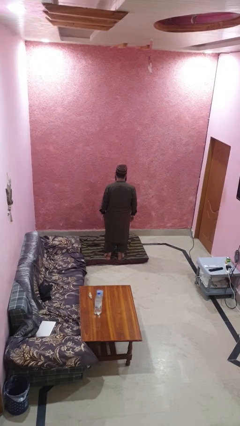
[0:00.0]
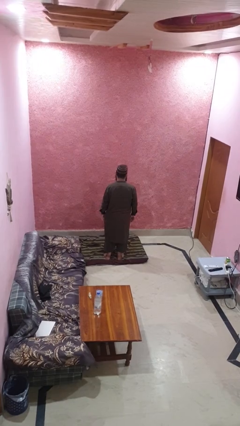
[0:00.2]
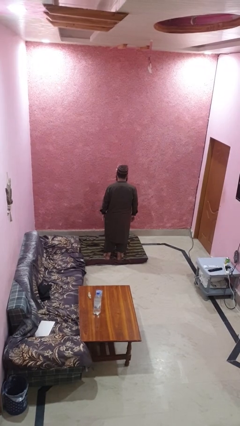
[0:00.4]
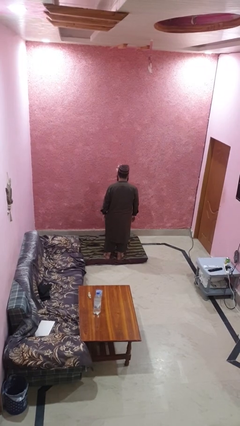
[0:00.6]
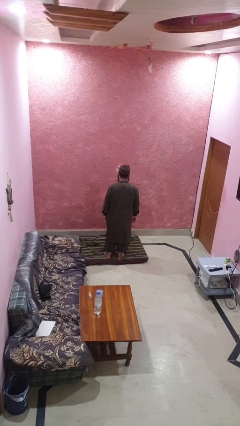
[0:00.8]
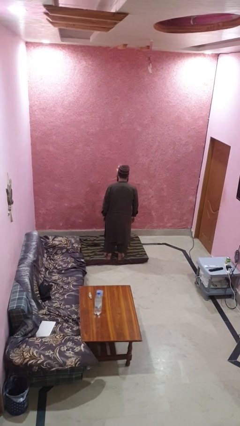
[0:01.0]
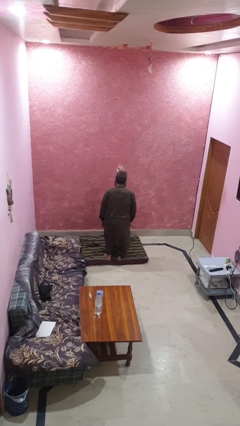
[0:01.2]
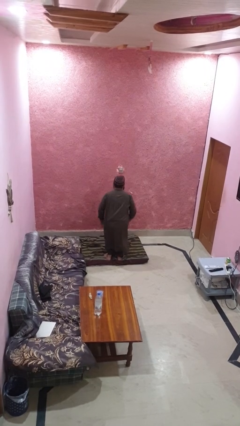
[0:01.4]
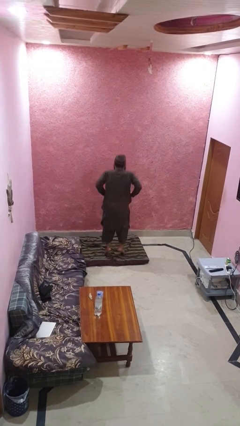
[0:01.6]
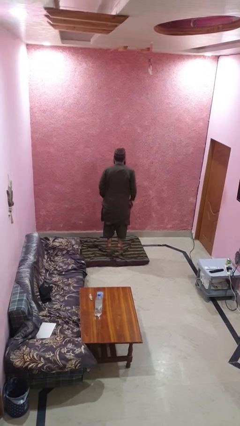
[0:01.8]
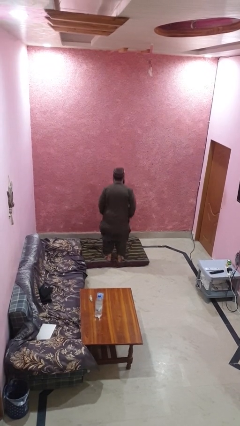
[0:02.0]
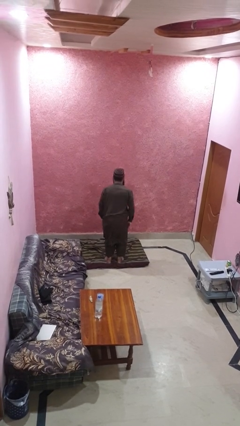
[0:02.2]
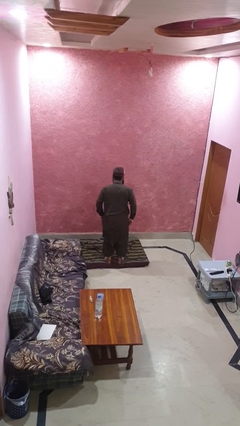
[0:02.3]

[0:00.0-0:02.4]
person jumps

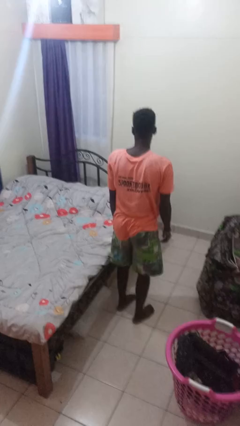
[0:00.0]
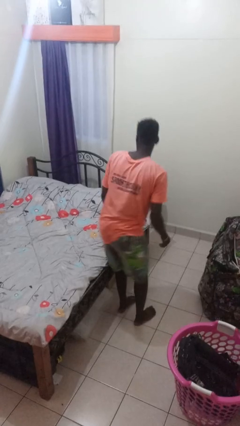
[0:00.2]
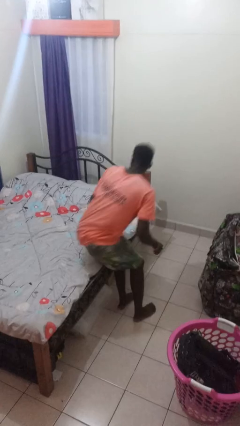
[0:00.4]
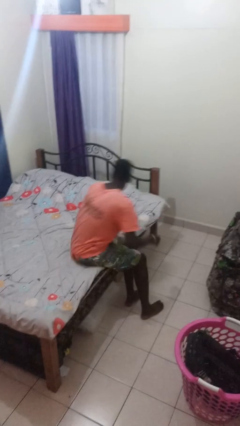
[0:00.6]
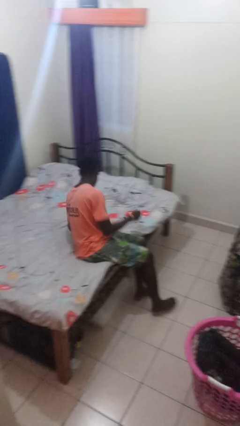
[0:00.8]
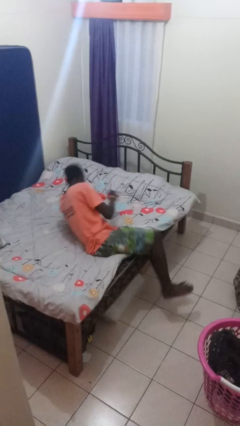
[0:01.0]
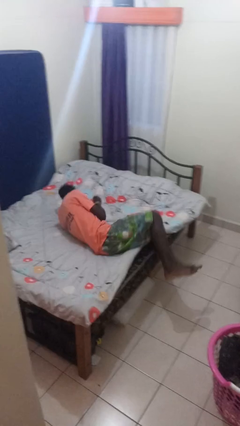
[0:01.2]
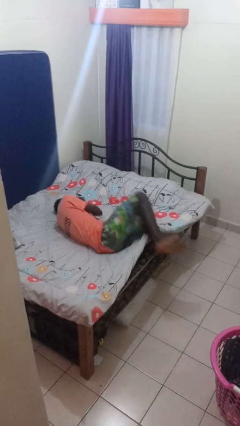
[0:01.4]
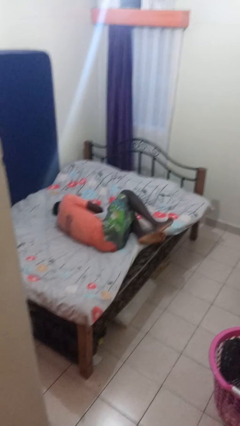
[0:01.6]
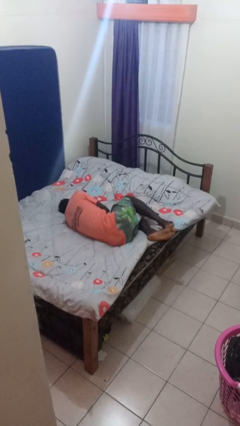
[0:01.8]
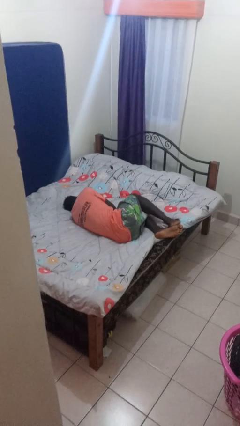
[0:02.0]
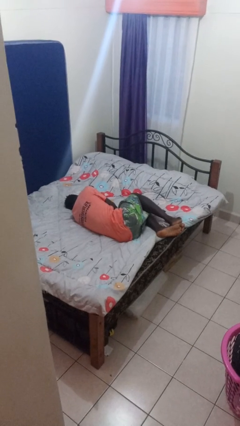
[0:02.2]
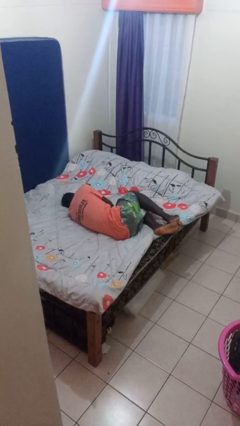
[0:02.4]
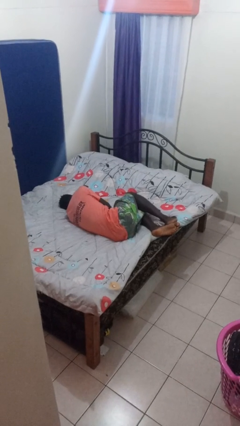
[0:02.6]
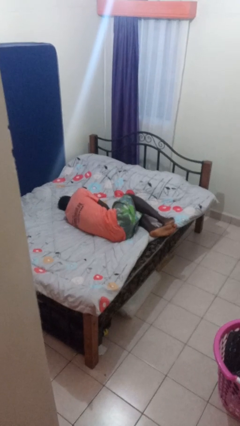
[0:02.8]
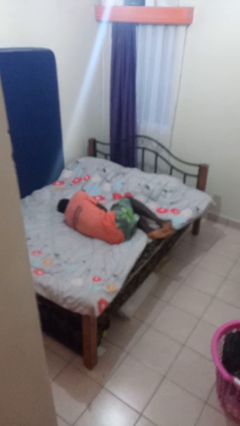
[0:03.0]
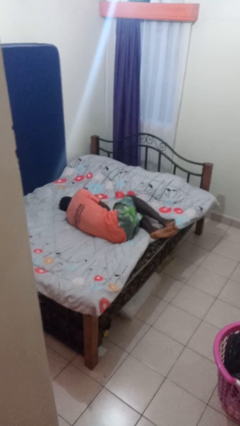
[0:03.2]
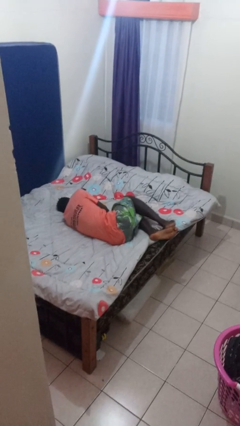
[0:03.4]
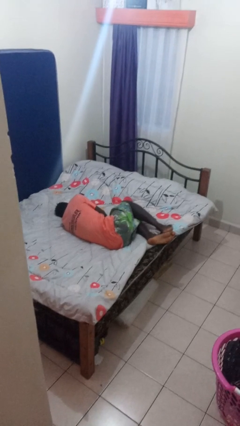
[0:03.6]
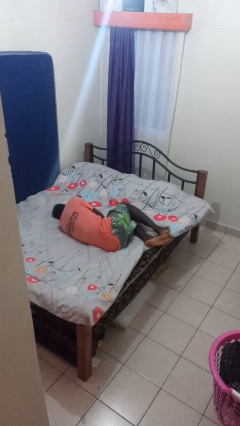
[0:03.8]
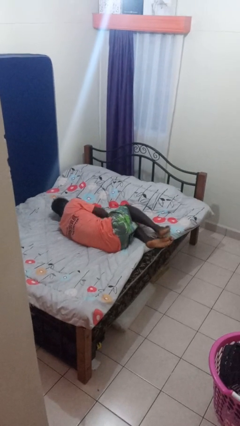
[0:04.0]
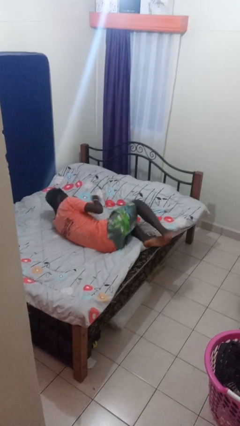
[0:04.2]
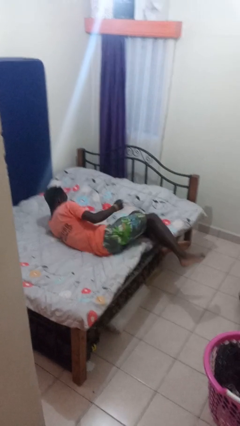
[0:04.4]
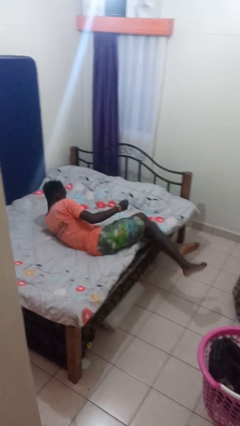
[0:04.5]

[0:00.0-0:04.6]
person lies down on bed

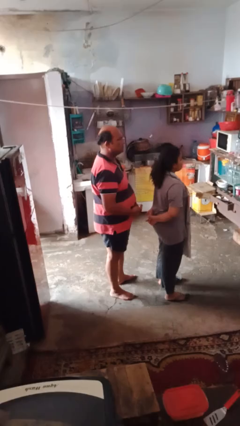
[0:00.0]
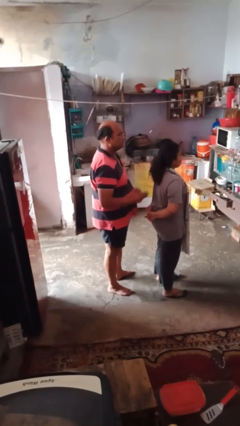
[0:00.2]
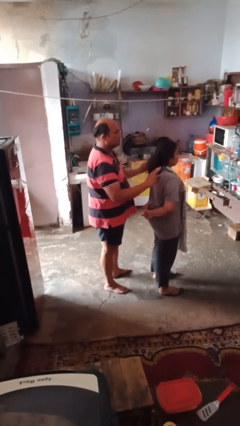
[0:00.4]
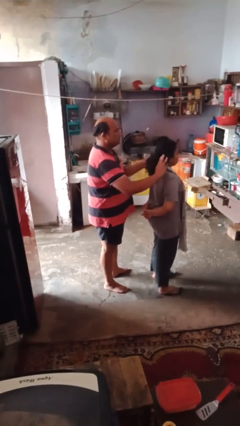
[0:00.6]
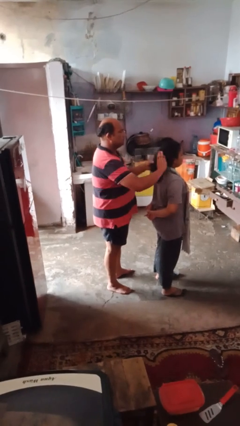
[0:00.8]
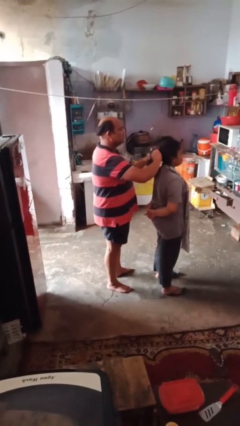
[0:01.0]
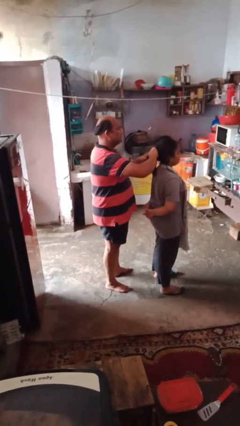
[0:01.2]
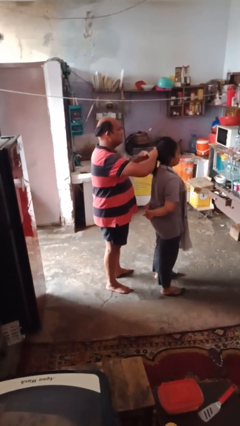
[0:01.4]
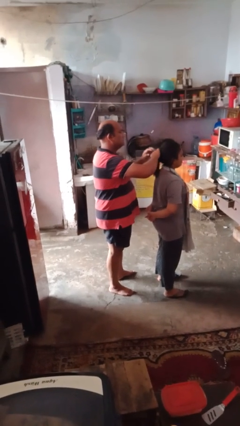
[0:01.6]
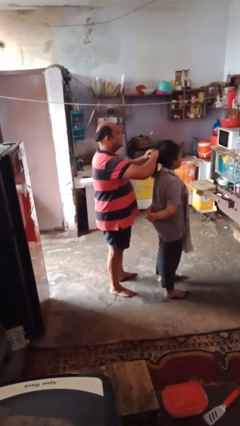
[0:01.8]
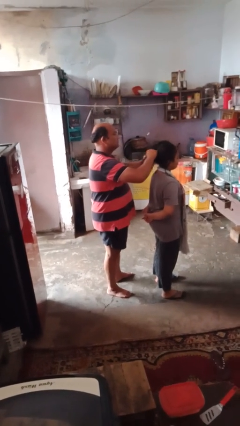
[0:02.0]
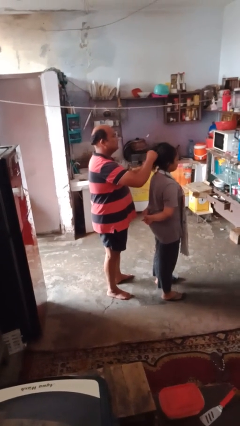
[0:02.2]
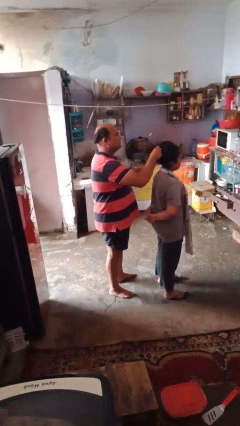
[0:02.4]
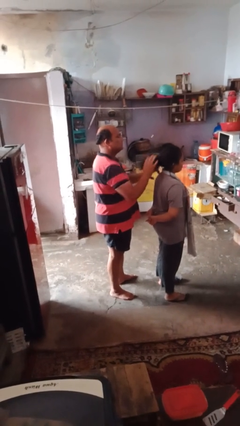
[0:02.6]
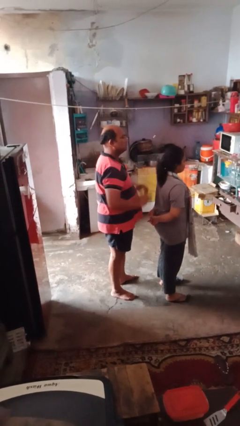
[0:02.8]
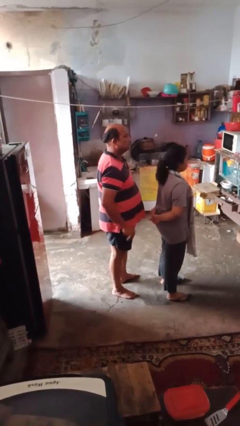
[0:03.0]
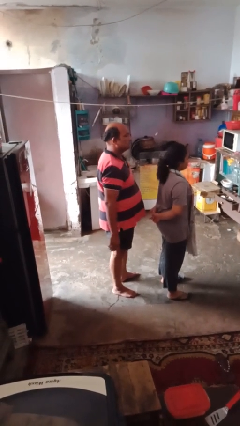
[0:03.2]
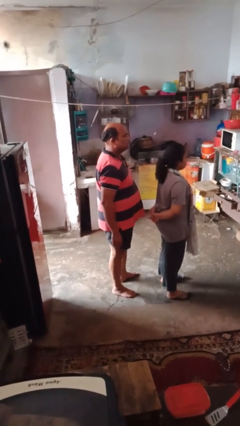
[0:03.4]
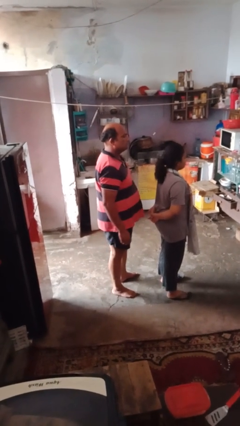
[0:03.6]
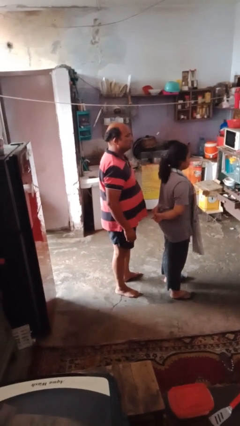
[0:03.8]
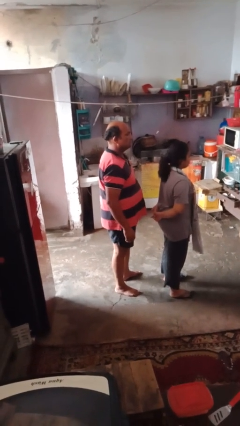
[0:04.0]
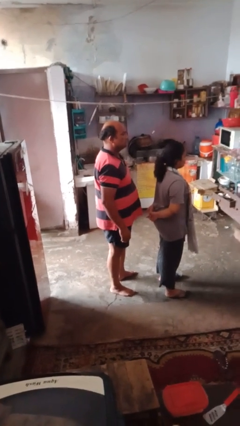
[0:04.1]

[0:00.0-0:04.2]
person braids hair of person

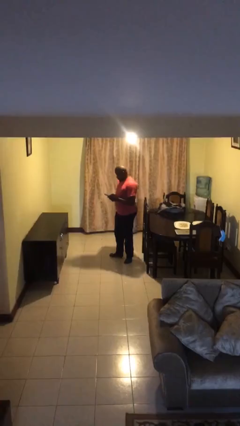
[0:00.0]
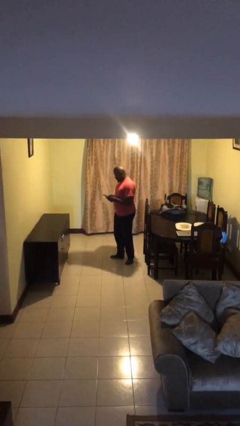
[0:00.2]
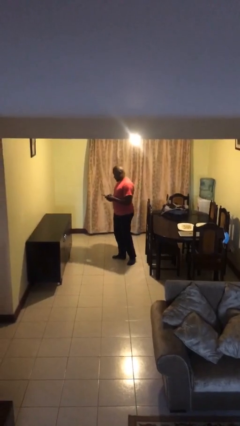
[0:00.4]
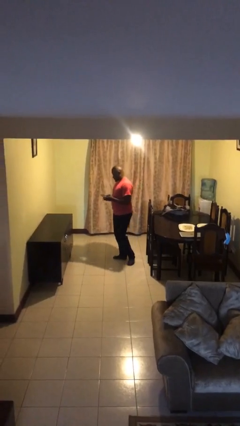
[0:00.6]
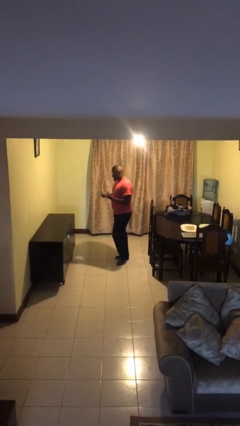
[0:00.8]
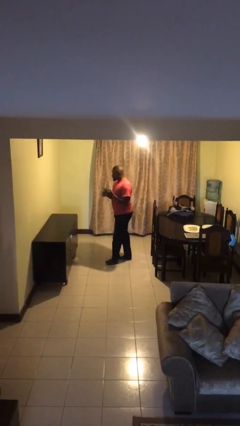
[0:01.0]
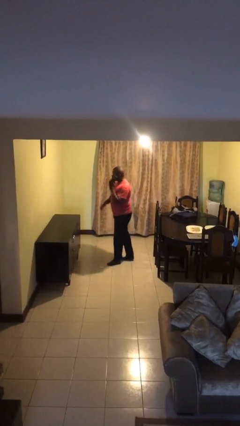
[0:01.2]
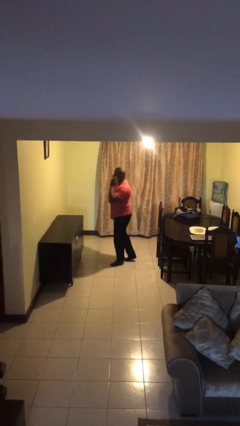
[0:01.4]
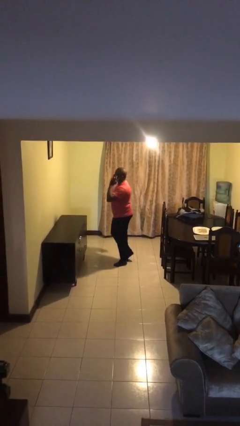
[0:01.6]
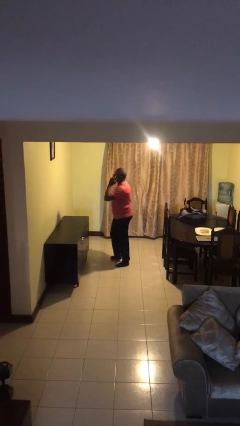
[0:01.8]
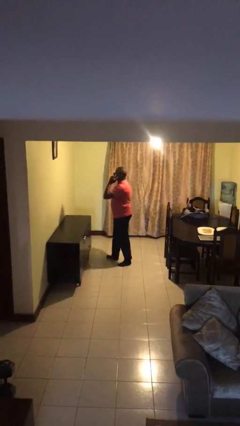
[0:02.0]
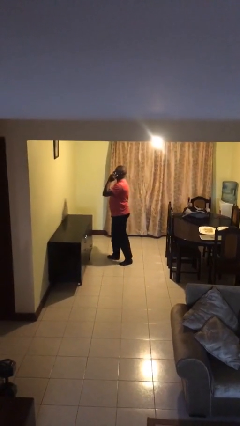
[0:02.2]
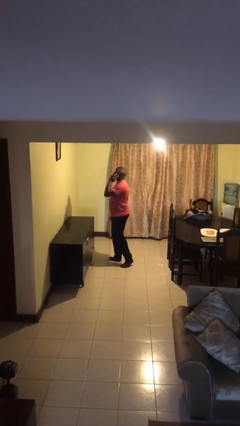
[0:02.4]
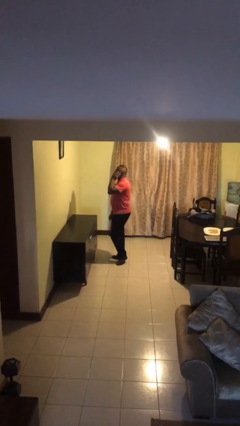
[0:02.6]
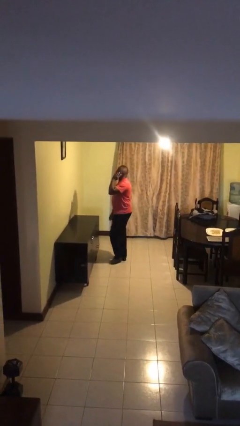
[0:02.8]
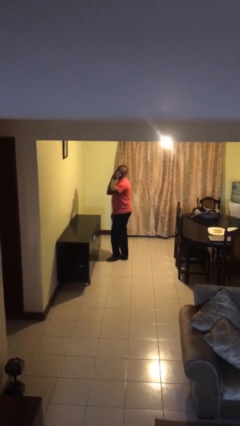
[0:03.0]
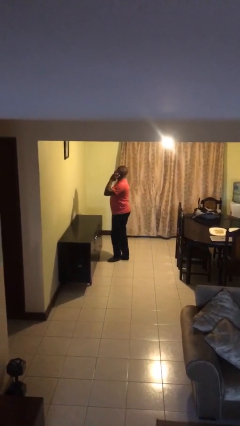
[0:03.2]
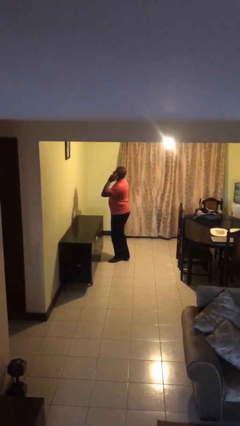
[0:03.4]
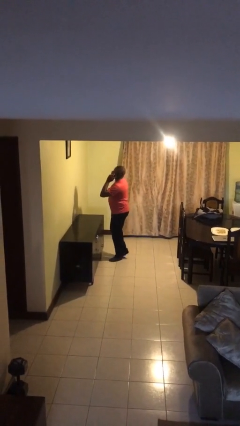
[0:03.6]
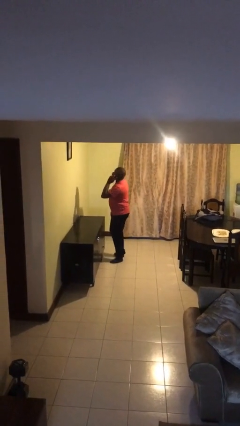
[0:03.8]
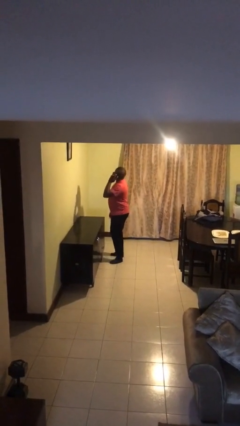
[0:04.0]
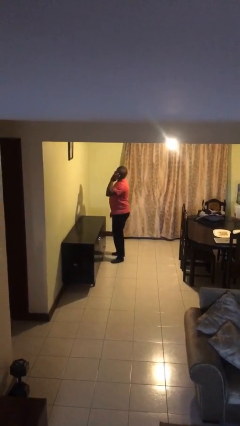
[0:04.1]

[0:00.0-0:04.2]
person talks on phone

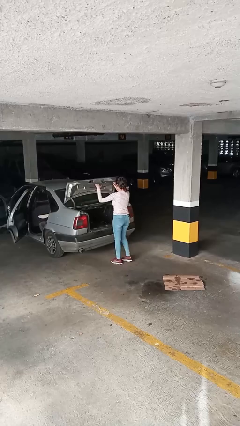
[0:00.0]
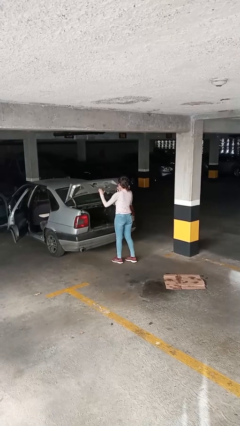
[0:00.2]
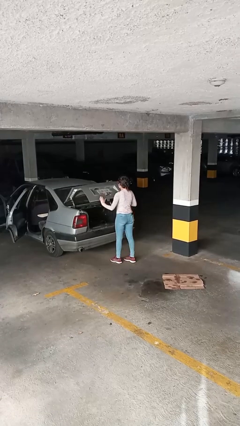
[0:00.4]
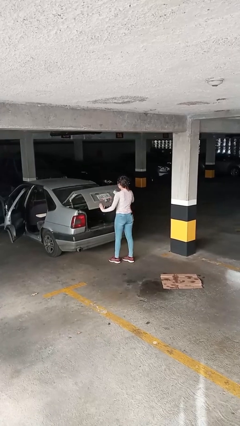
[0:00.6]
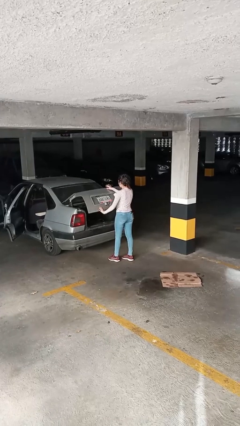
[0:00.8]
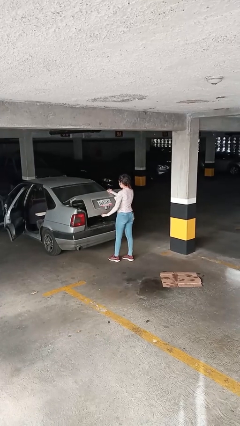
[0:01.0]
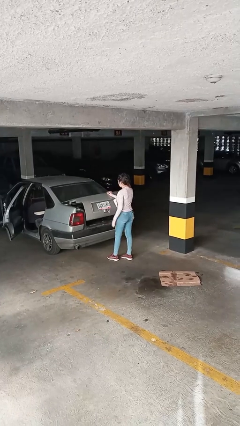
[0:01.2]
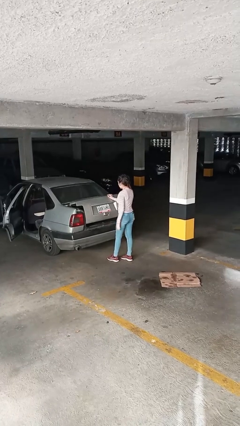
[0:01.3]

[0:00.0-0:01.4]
person closes car trunk

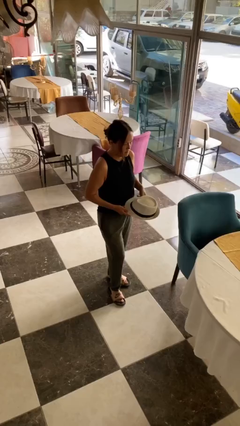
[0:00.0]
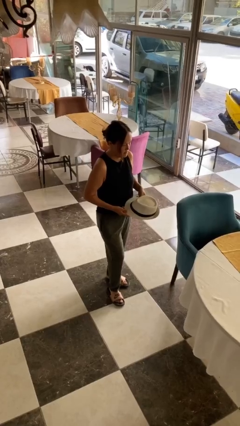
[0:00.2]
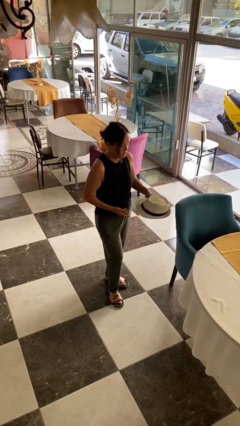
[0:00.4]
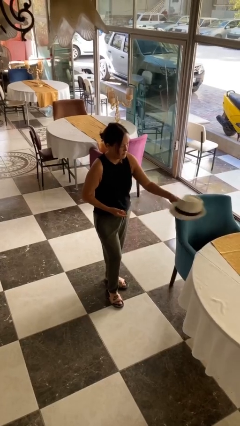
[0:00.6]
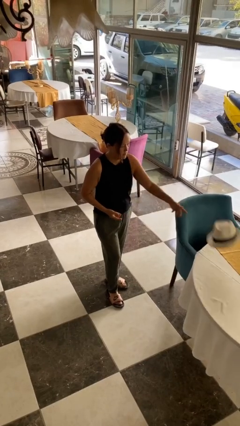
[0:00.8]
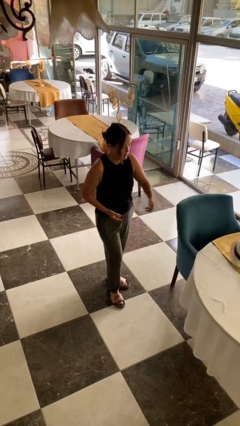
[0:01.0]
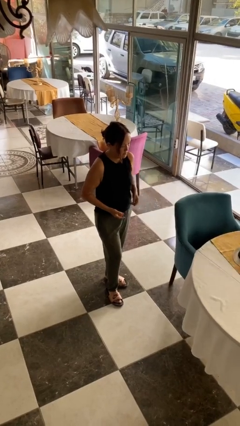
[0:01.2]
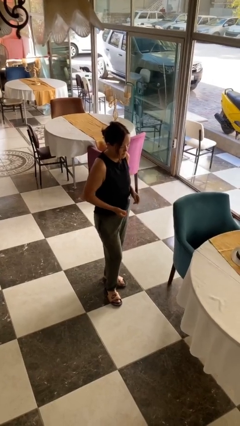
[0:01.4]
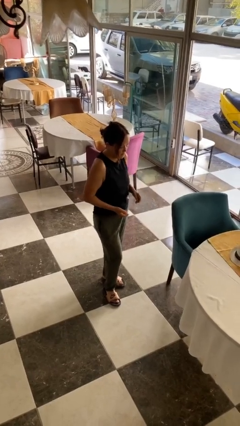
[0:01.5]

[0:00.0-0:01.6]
person throws object on table
